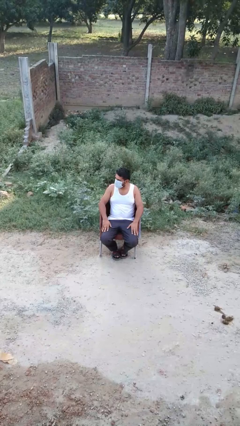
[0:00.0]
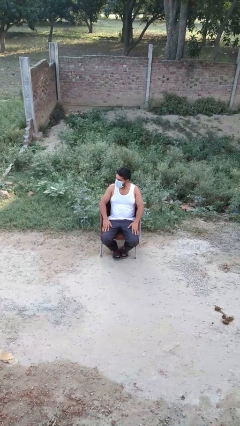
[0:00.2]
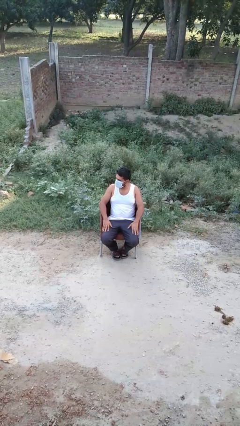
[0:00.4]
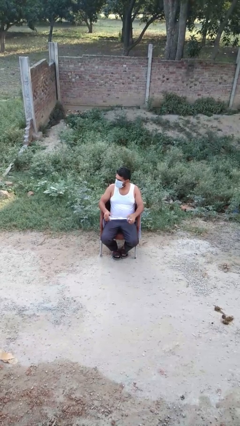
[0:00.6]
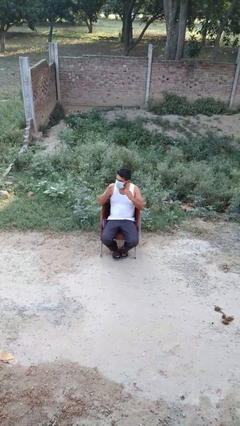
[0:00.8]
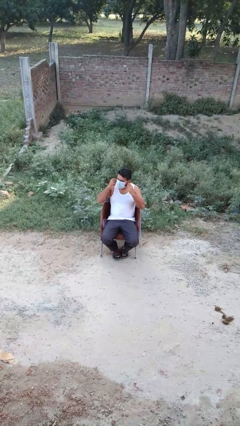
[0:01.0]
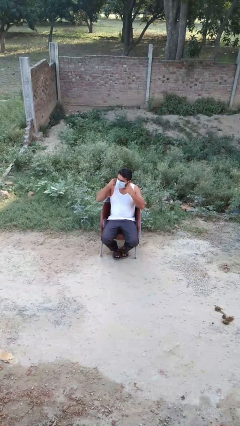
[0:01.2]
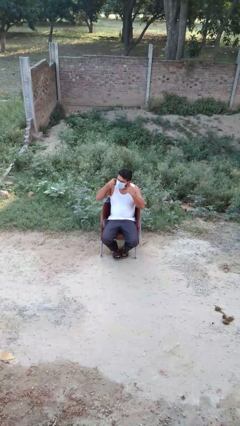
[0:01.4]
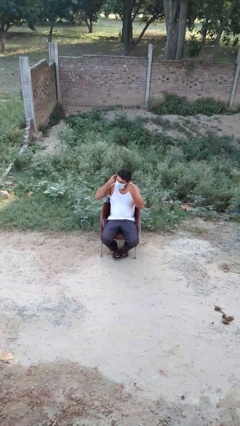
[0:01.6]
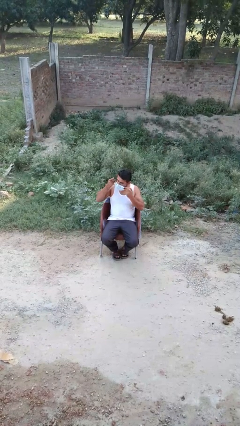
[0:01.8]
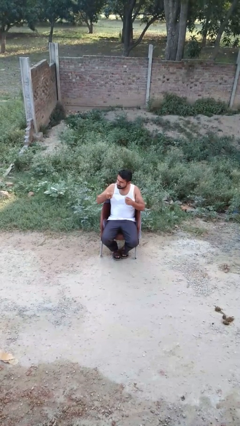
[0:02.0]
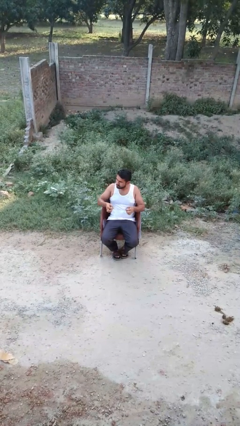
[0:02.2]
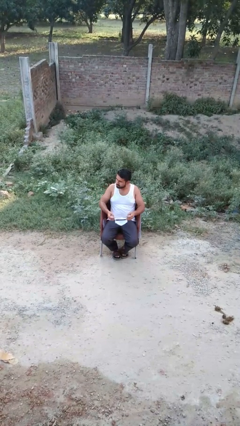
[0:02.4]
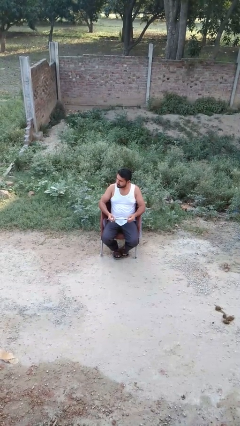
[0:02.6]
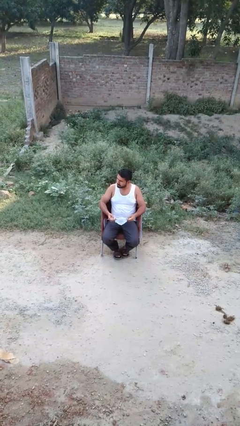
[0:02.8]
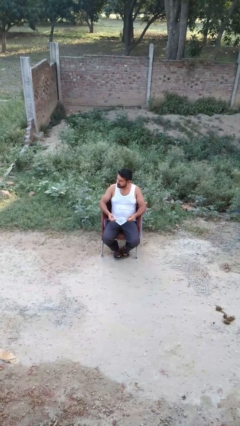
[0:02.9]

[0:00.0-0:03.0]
person takes off facemask

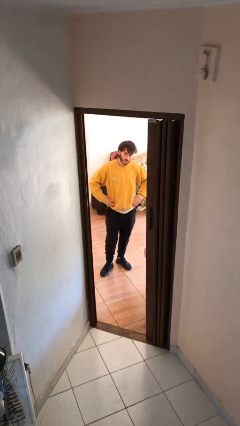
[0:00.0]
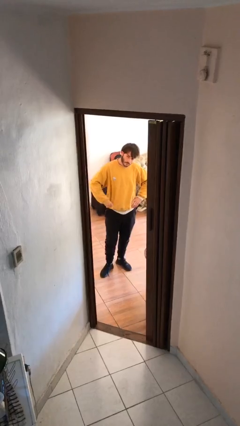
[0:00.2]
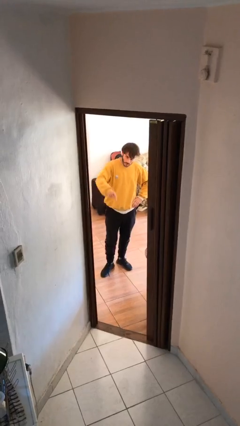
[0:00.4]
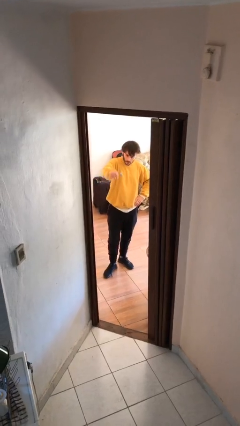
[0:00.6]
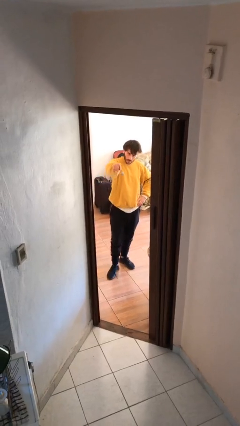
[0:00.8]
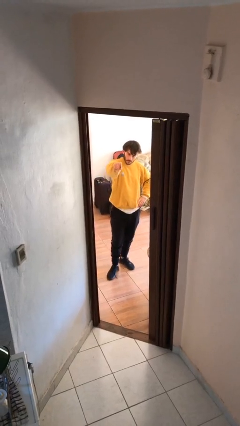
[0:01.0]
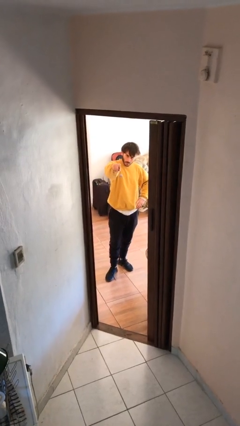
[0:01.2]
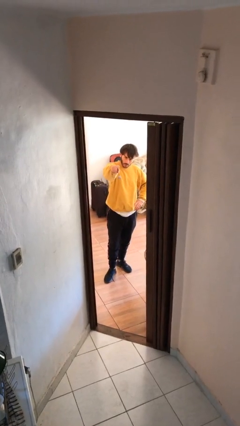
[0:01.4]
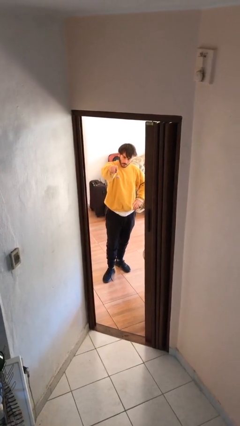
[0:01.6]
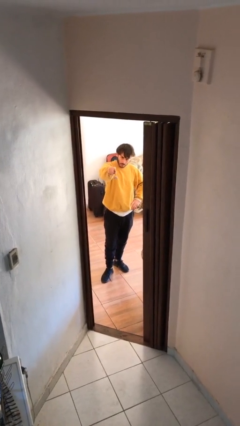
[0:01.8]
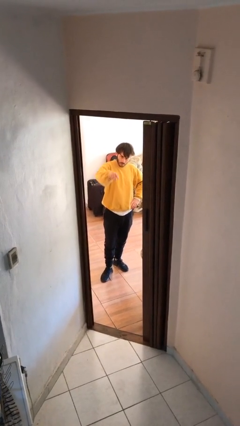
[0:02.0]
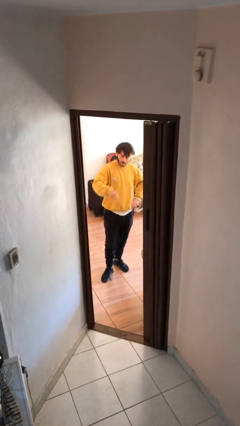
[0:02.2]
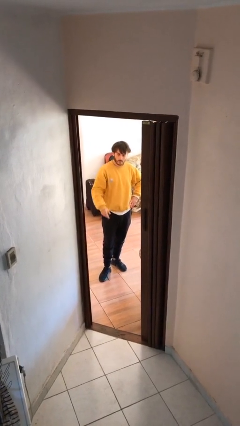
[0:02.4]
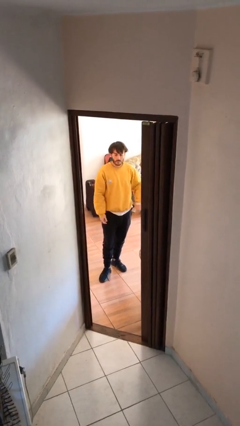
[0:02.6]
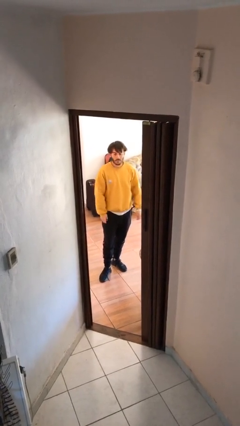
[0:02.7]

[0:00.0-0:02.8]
person points at person

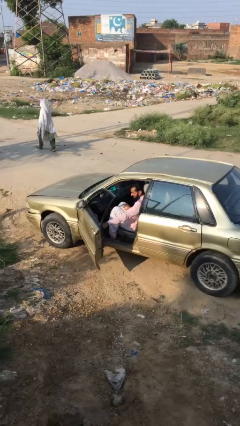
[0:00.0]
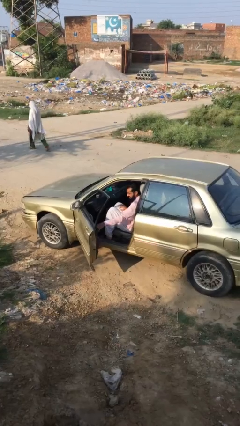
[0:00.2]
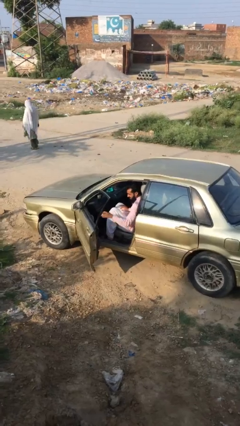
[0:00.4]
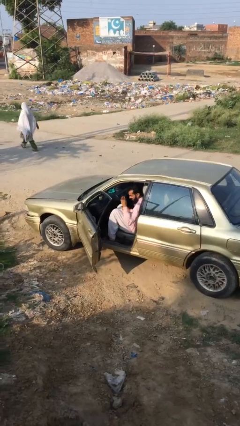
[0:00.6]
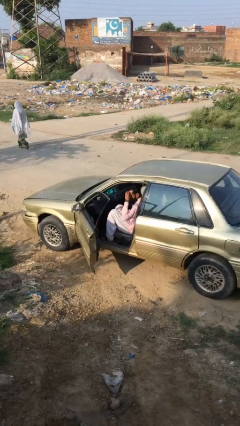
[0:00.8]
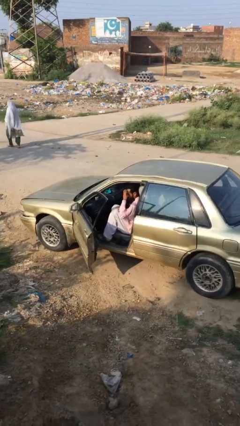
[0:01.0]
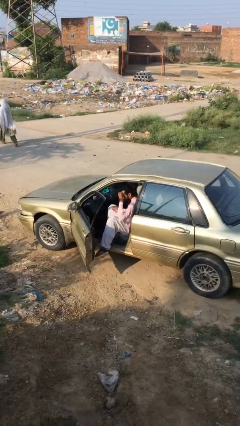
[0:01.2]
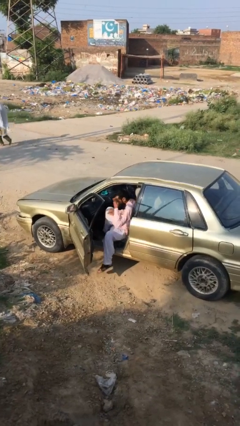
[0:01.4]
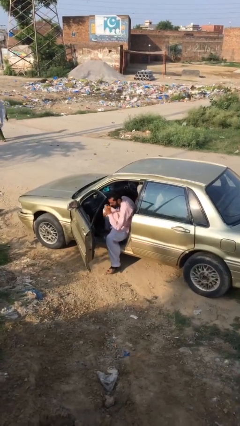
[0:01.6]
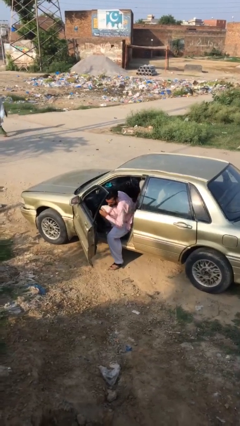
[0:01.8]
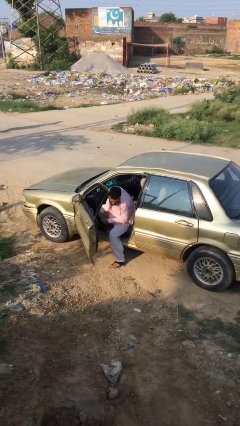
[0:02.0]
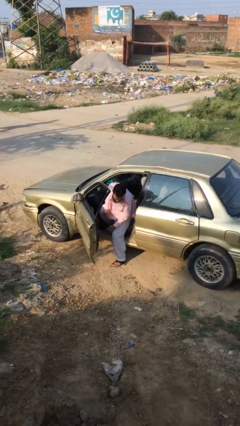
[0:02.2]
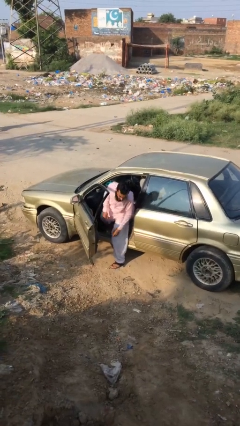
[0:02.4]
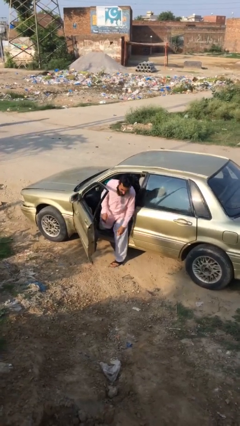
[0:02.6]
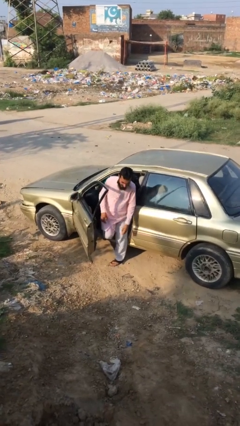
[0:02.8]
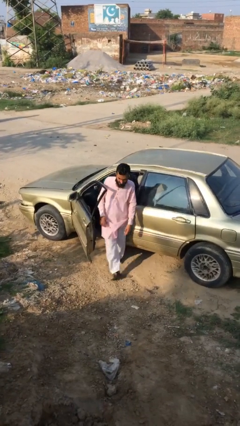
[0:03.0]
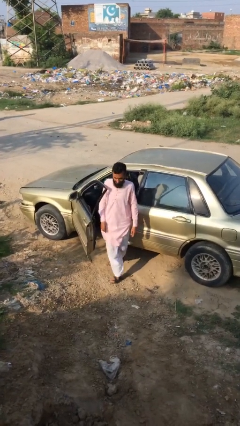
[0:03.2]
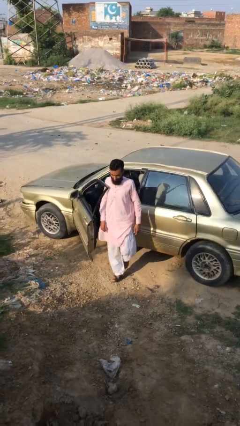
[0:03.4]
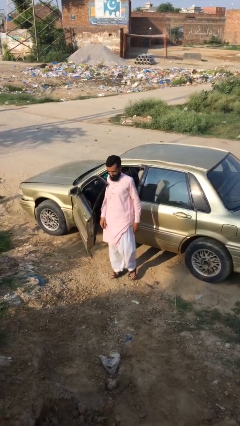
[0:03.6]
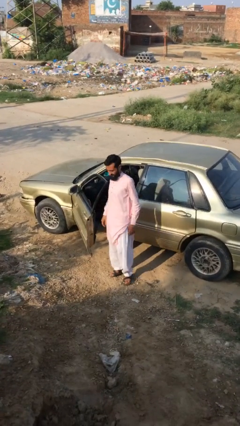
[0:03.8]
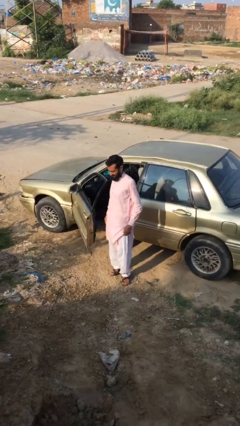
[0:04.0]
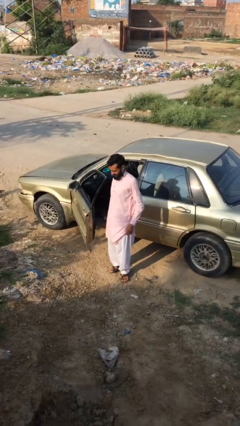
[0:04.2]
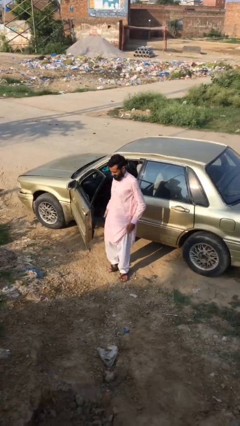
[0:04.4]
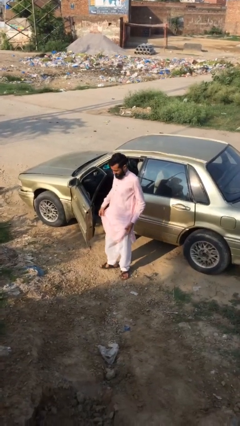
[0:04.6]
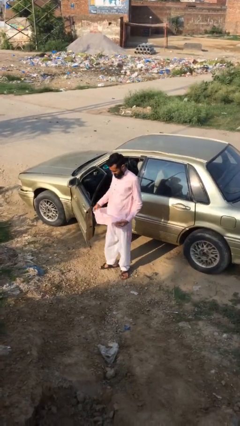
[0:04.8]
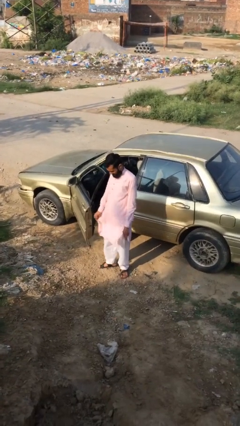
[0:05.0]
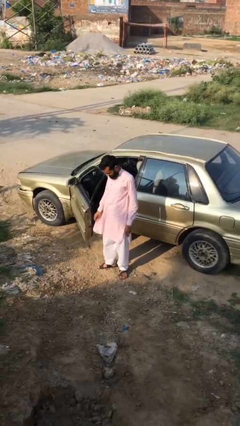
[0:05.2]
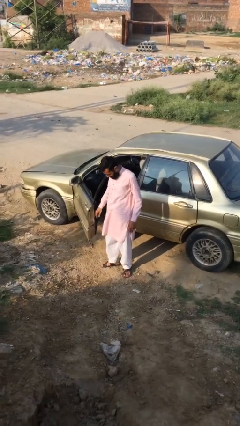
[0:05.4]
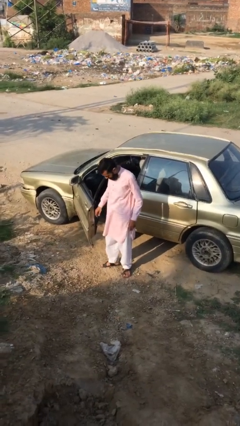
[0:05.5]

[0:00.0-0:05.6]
person exits car

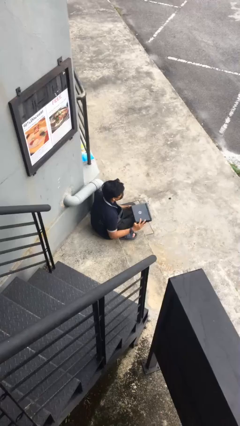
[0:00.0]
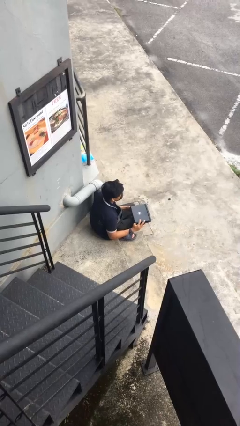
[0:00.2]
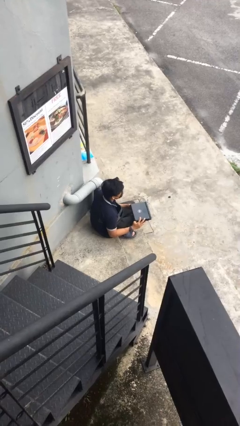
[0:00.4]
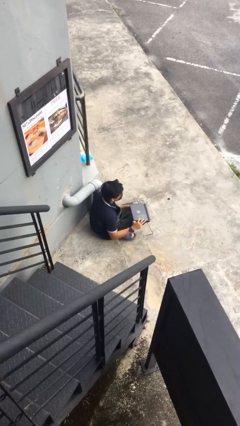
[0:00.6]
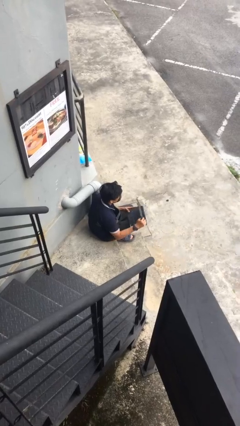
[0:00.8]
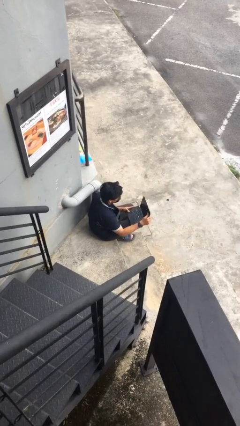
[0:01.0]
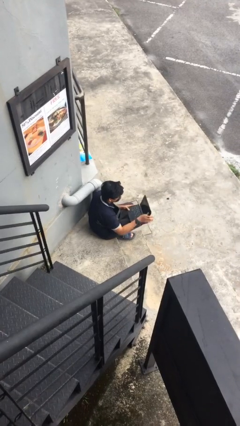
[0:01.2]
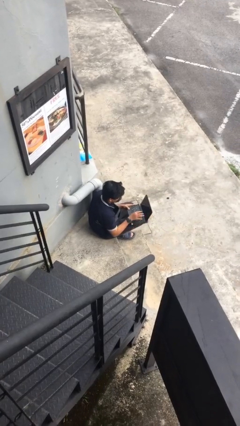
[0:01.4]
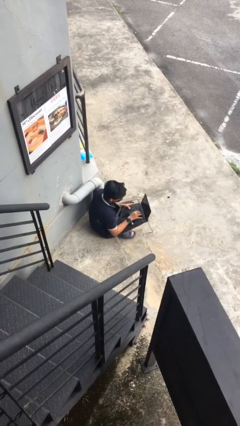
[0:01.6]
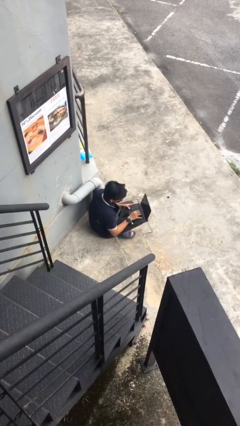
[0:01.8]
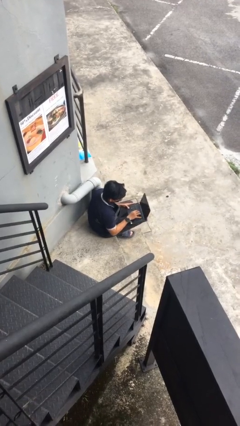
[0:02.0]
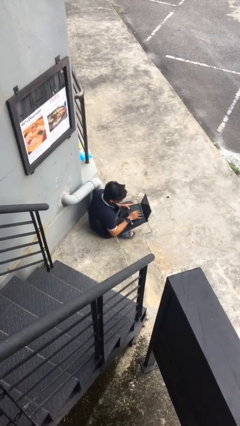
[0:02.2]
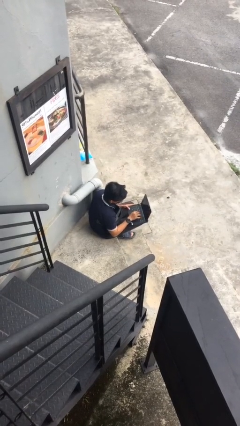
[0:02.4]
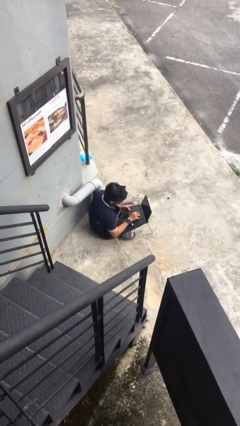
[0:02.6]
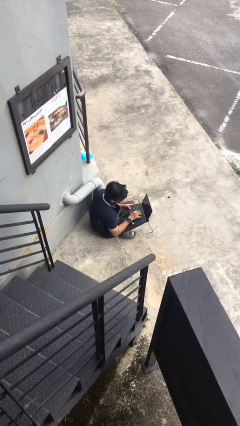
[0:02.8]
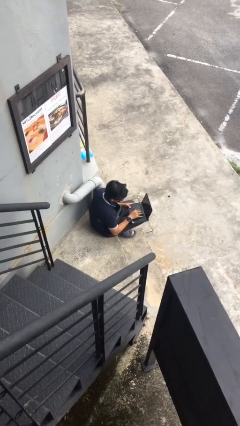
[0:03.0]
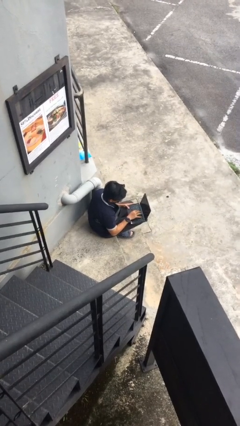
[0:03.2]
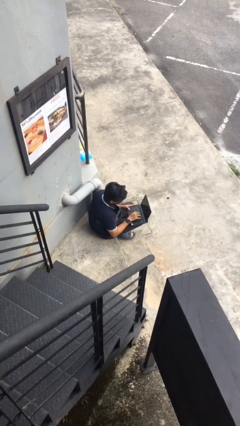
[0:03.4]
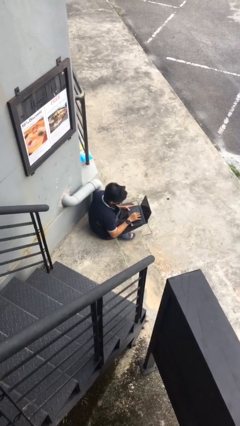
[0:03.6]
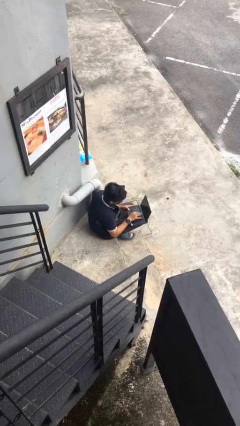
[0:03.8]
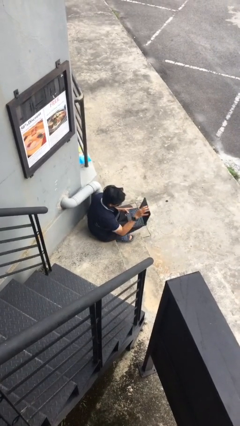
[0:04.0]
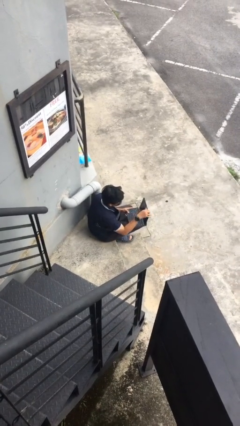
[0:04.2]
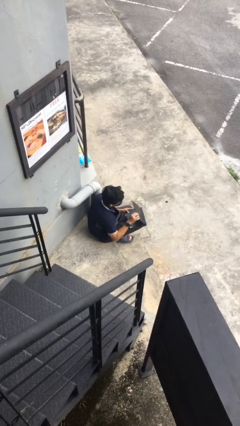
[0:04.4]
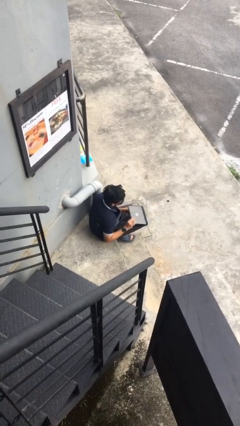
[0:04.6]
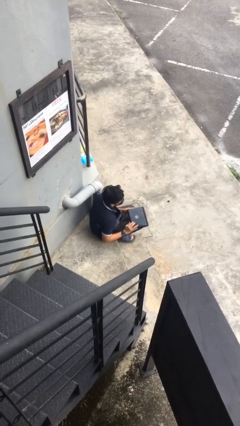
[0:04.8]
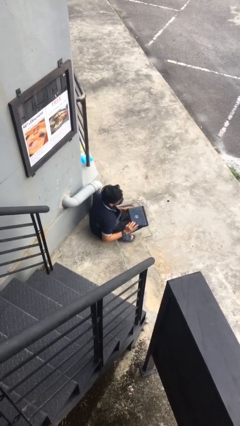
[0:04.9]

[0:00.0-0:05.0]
person interacts with laptop

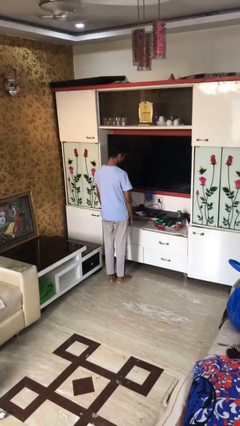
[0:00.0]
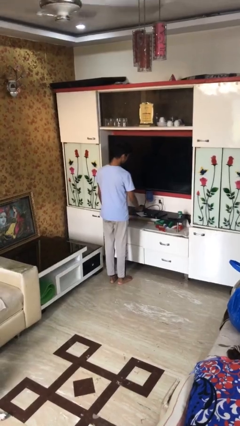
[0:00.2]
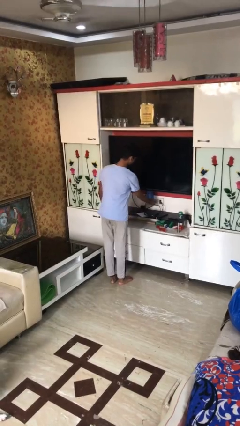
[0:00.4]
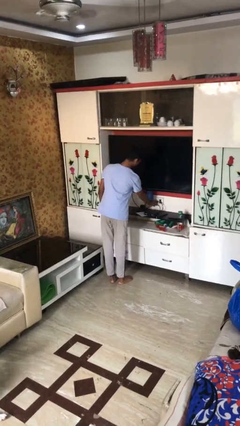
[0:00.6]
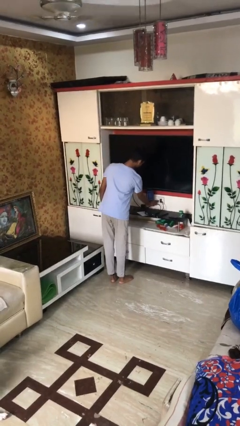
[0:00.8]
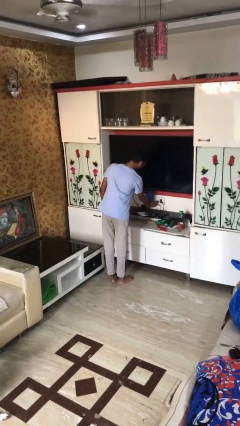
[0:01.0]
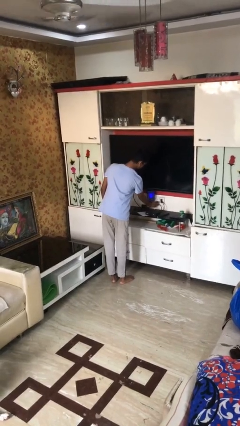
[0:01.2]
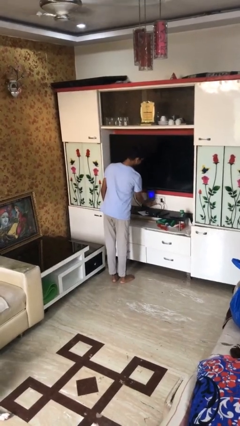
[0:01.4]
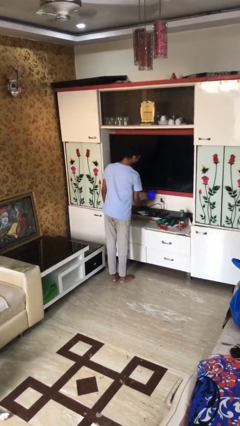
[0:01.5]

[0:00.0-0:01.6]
person turns on lamp
